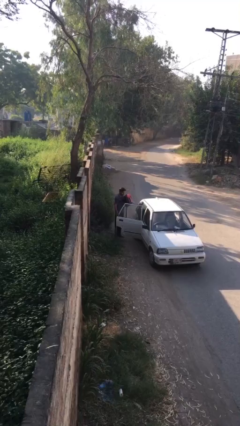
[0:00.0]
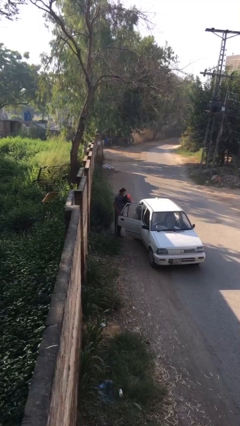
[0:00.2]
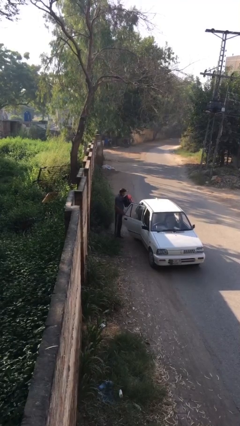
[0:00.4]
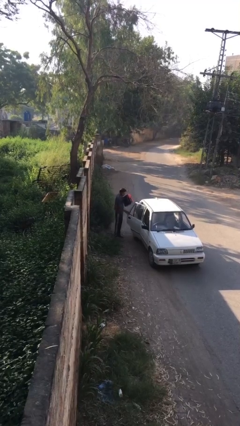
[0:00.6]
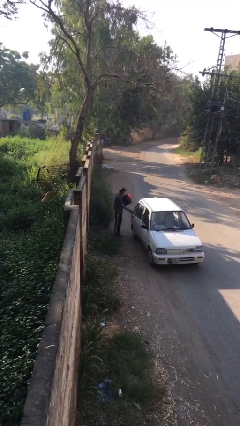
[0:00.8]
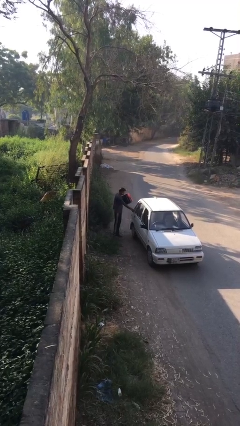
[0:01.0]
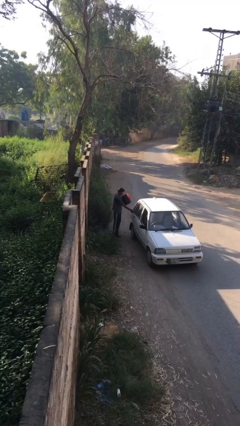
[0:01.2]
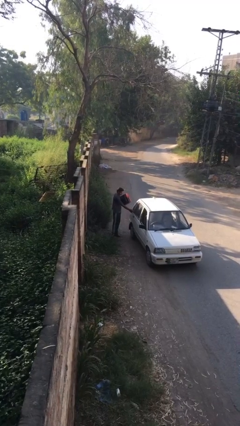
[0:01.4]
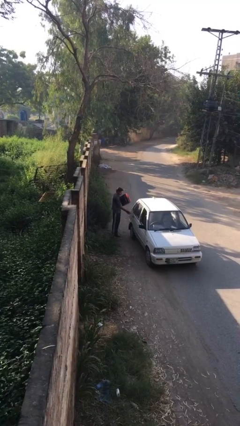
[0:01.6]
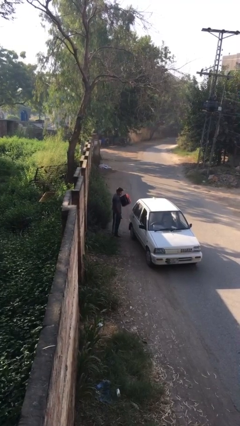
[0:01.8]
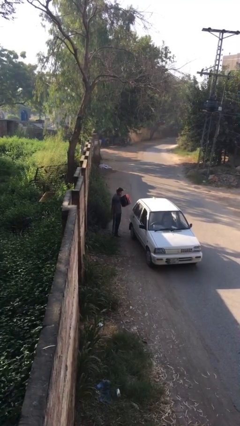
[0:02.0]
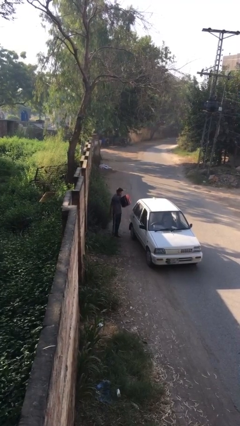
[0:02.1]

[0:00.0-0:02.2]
person closes car door

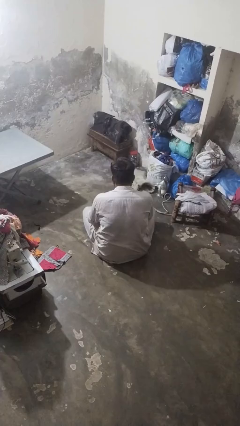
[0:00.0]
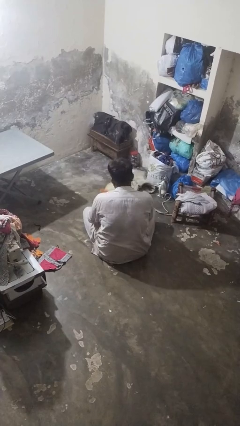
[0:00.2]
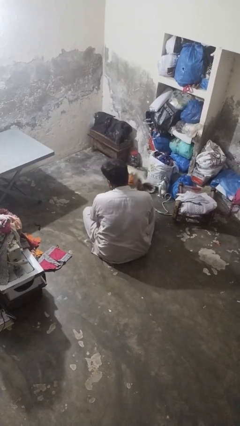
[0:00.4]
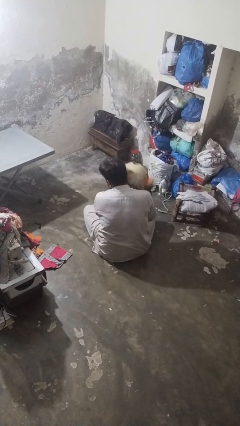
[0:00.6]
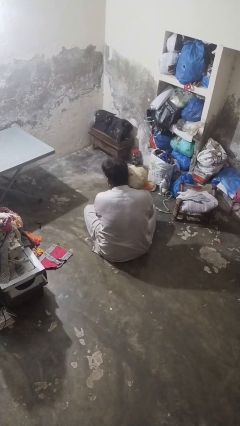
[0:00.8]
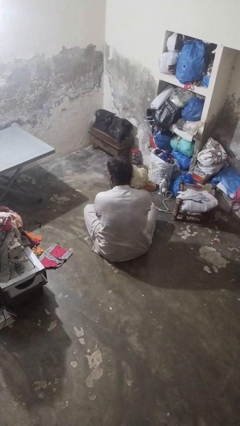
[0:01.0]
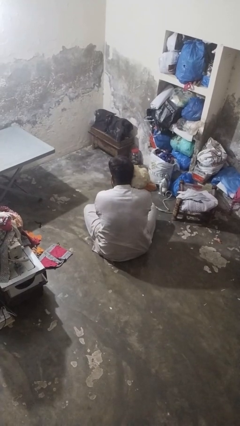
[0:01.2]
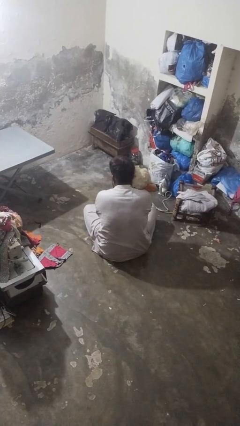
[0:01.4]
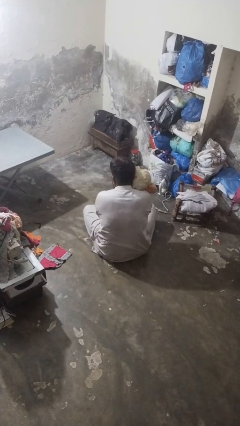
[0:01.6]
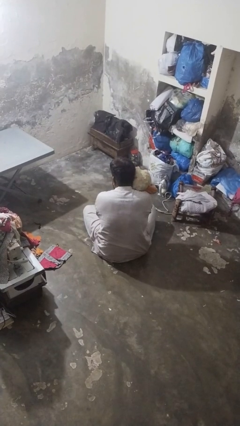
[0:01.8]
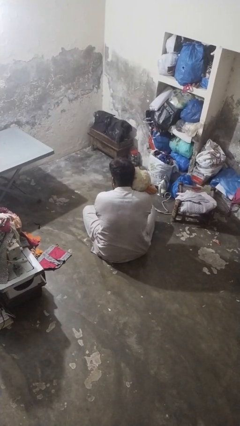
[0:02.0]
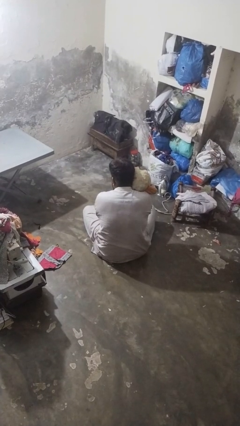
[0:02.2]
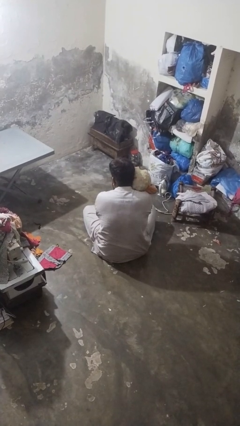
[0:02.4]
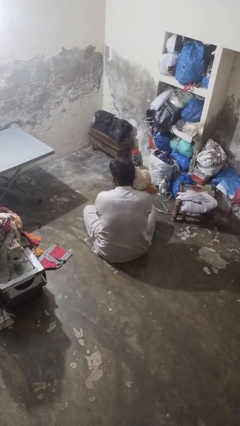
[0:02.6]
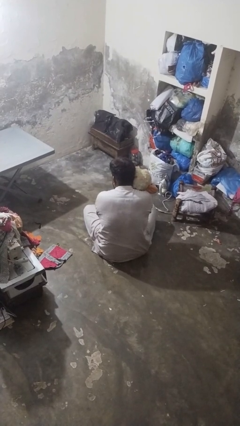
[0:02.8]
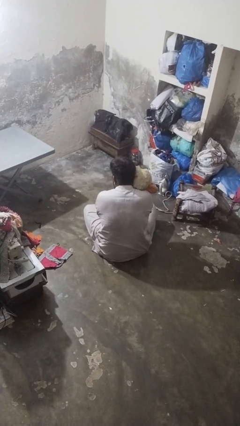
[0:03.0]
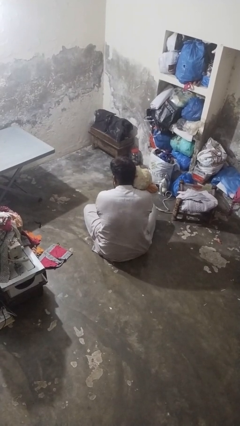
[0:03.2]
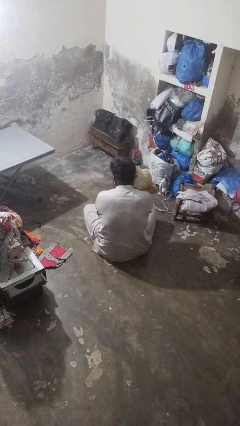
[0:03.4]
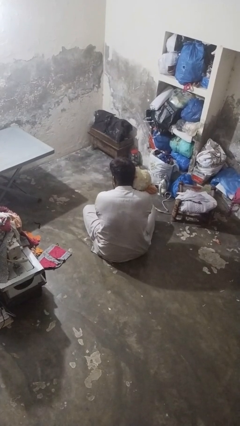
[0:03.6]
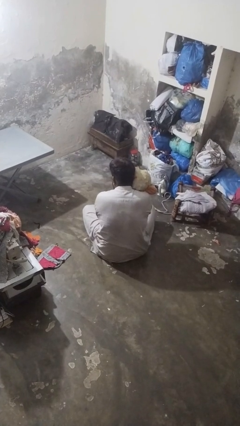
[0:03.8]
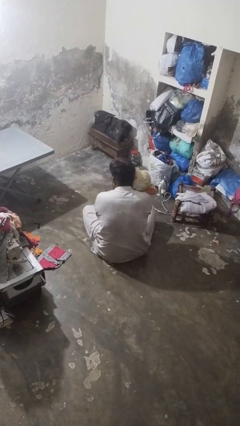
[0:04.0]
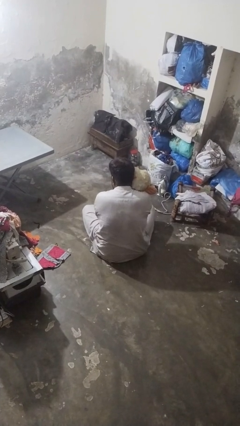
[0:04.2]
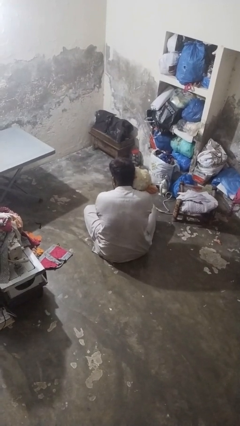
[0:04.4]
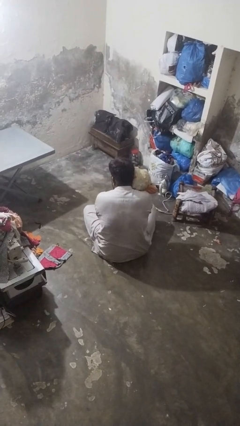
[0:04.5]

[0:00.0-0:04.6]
person hugs stuffed animal

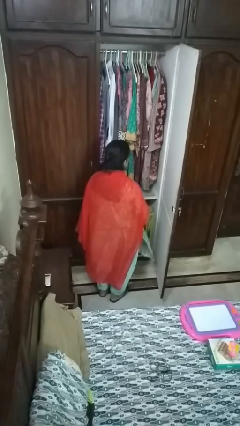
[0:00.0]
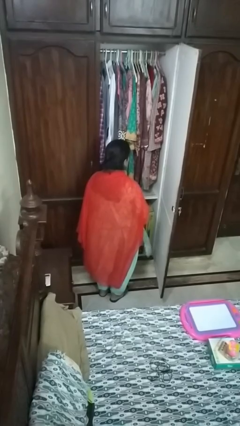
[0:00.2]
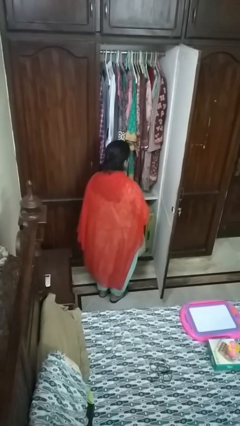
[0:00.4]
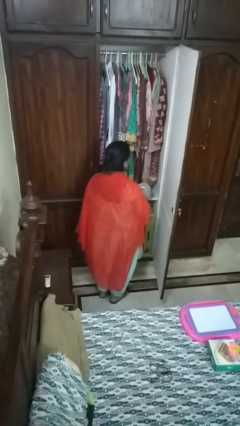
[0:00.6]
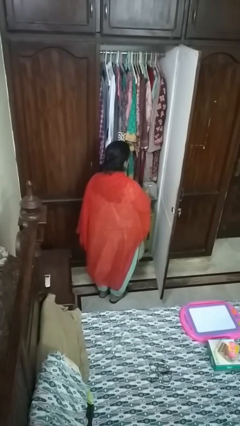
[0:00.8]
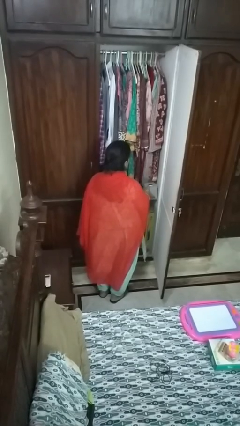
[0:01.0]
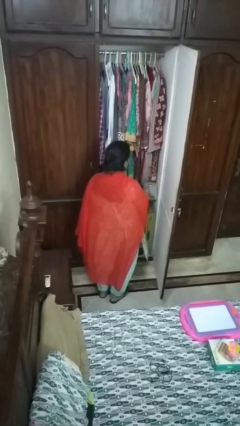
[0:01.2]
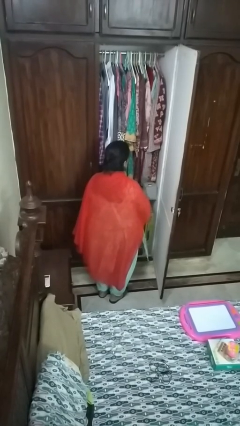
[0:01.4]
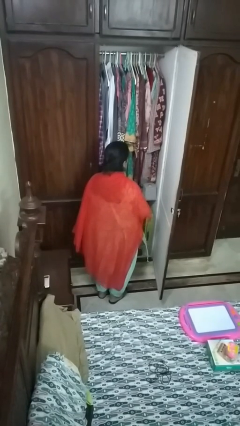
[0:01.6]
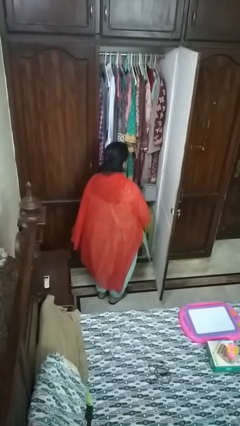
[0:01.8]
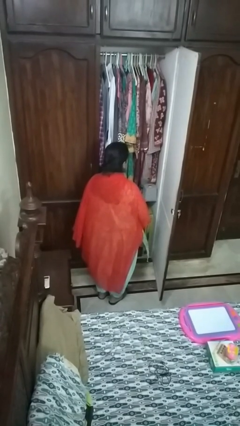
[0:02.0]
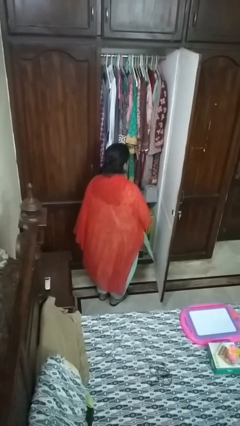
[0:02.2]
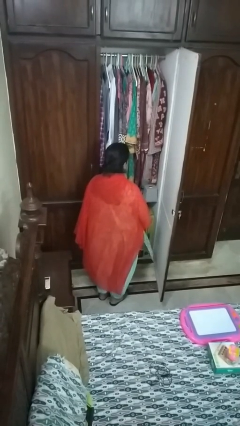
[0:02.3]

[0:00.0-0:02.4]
person puts down object into cabinet

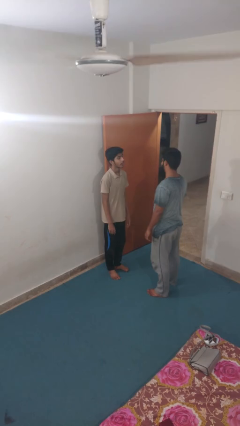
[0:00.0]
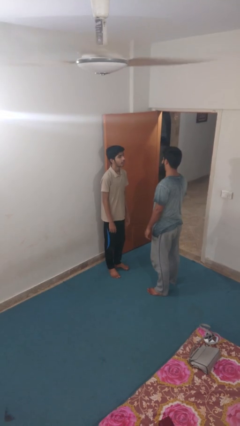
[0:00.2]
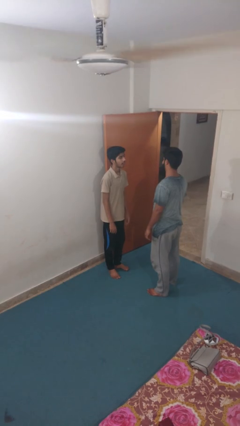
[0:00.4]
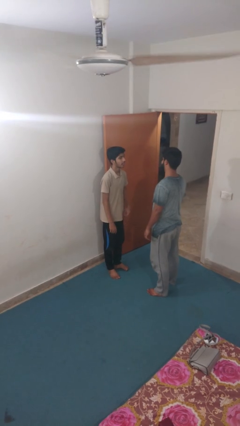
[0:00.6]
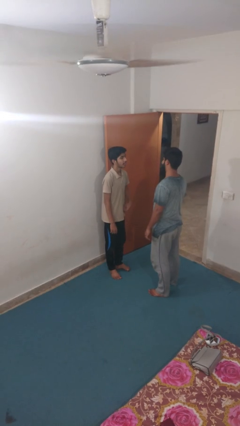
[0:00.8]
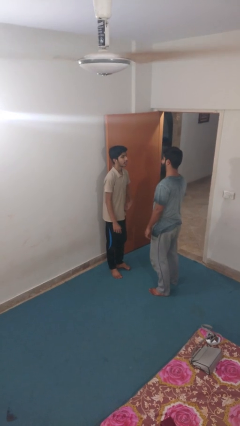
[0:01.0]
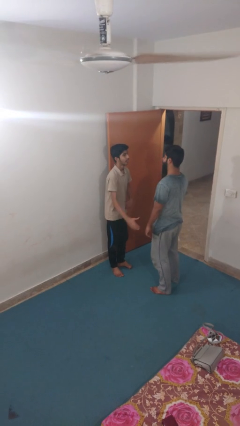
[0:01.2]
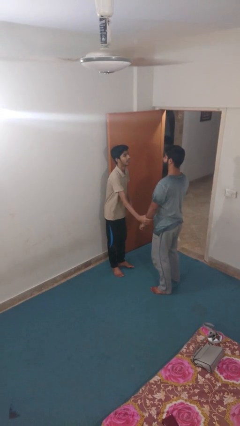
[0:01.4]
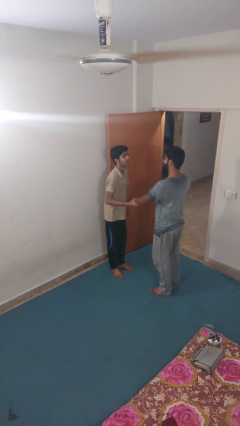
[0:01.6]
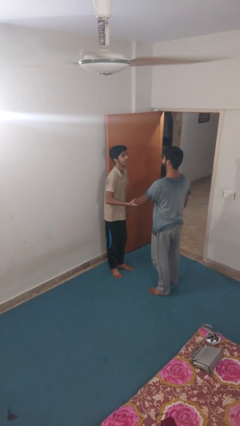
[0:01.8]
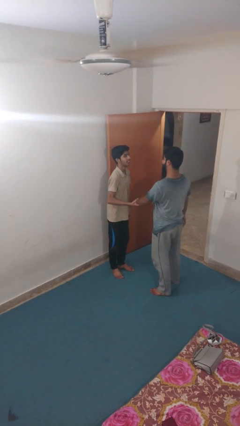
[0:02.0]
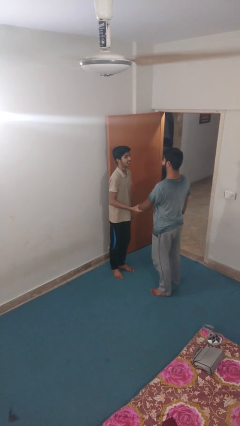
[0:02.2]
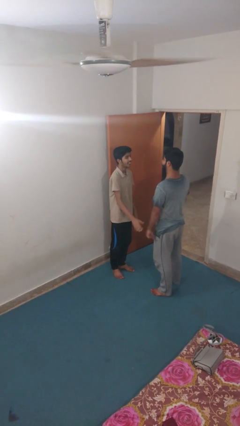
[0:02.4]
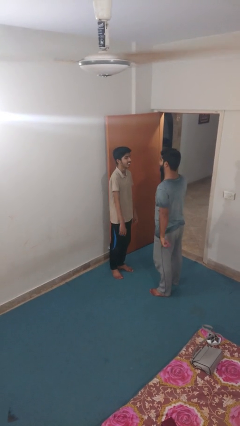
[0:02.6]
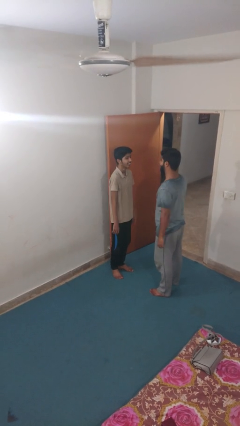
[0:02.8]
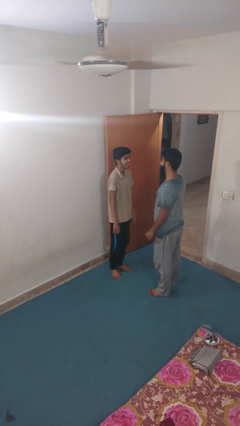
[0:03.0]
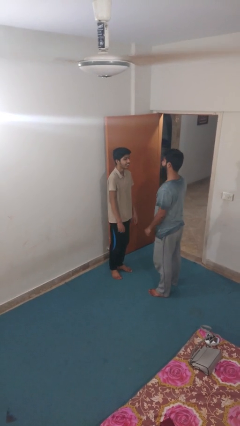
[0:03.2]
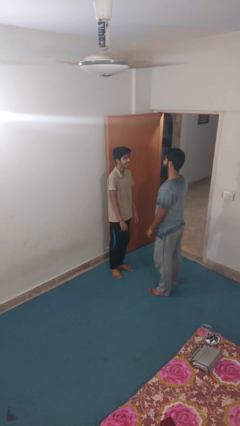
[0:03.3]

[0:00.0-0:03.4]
person grabs person by forearm

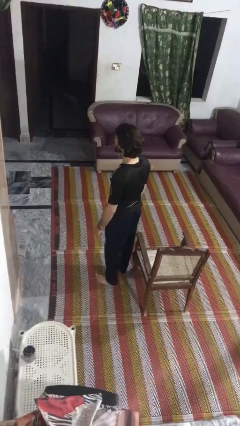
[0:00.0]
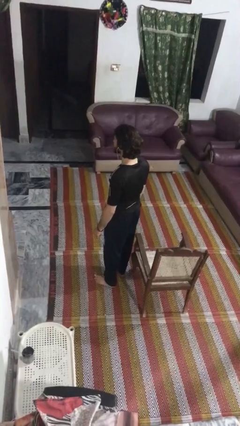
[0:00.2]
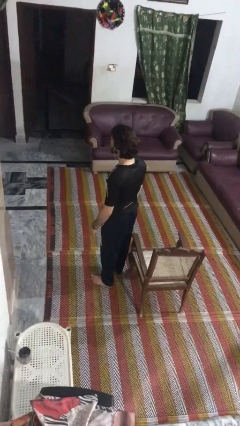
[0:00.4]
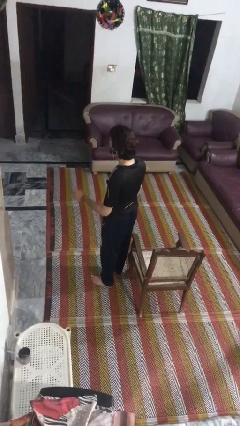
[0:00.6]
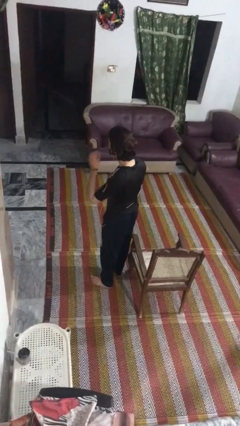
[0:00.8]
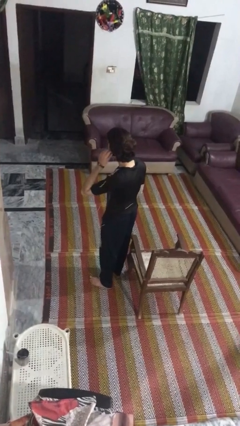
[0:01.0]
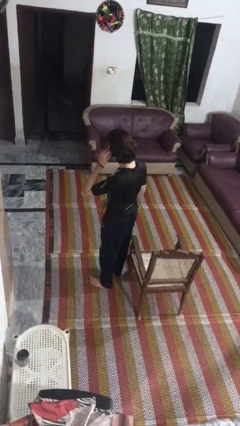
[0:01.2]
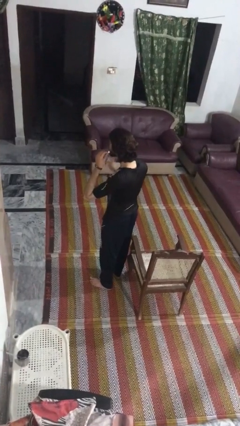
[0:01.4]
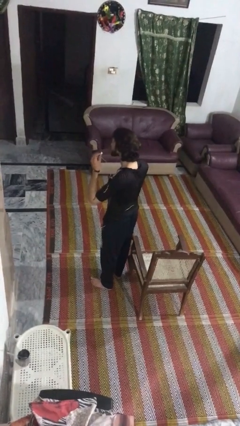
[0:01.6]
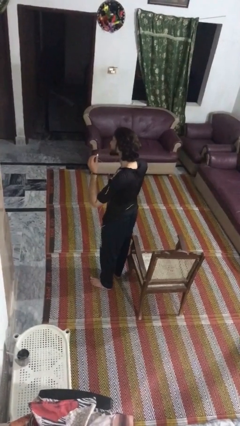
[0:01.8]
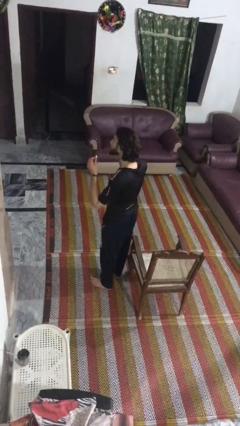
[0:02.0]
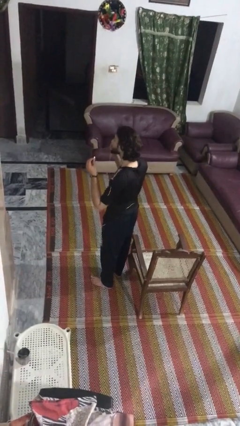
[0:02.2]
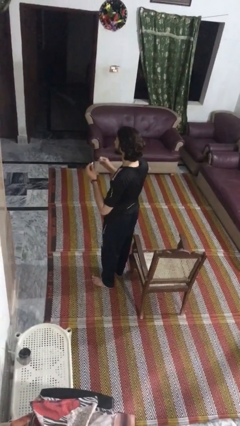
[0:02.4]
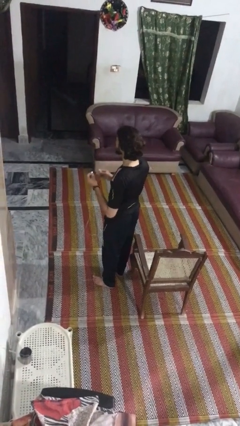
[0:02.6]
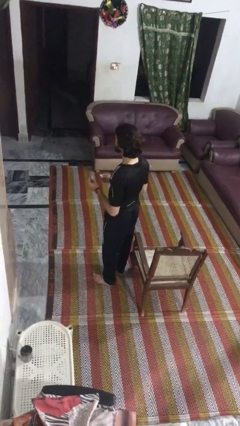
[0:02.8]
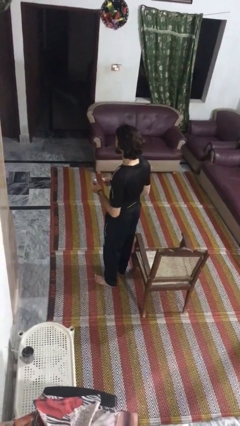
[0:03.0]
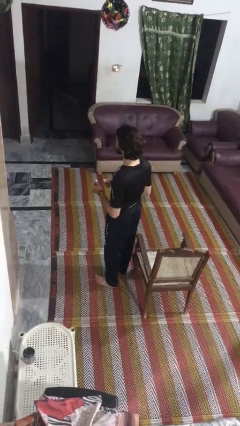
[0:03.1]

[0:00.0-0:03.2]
person takes off headphones

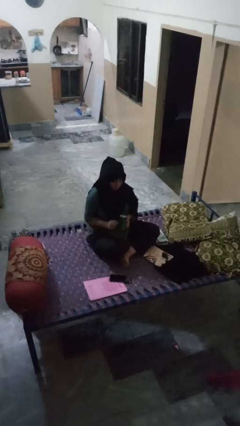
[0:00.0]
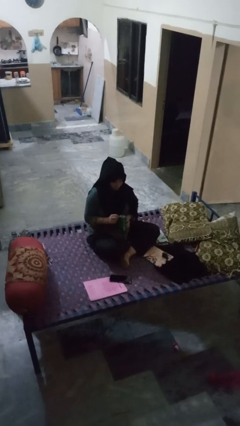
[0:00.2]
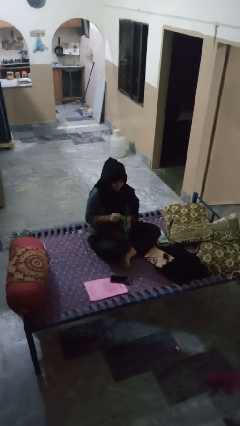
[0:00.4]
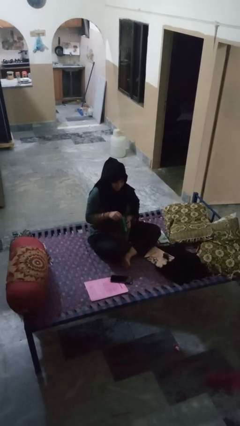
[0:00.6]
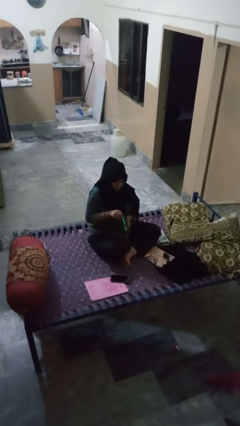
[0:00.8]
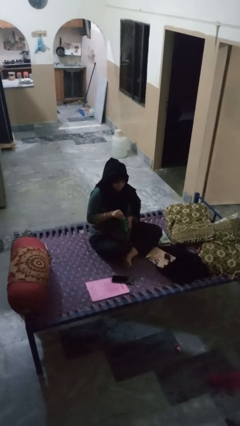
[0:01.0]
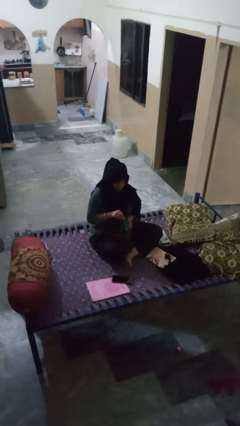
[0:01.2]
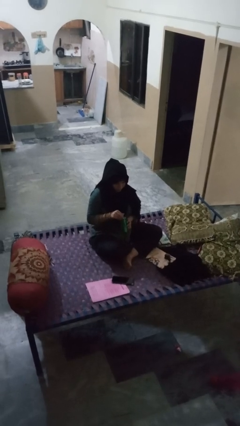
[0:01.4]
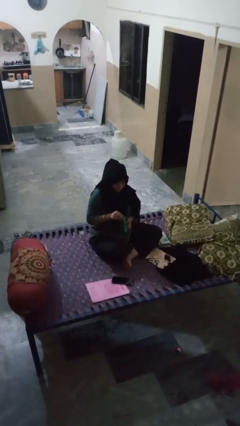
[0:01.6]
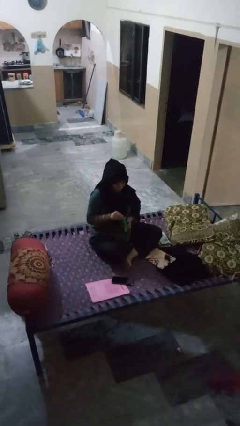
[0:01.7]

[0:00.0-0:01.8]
person opens can with can opener
